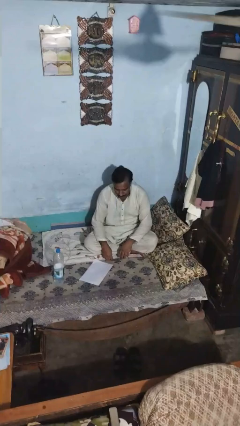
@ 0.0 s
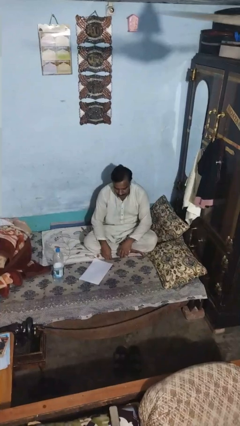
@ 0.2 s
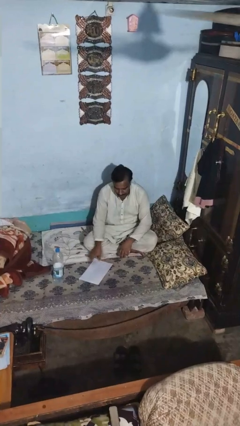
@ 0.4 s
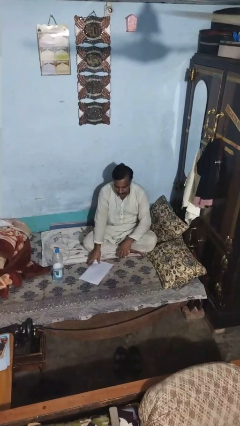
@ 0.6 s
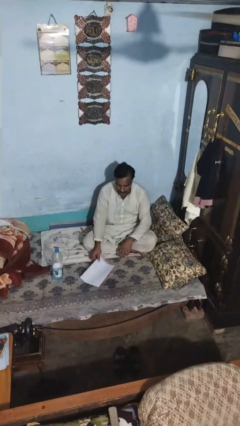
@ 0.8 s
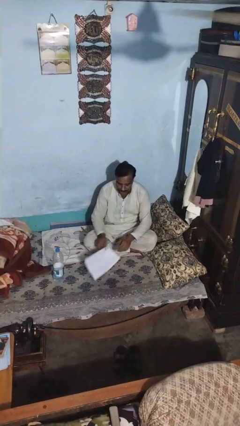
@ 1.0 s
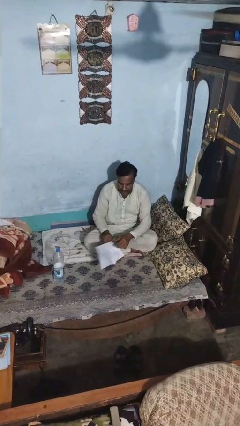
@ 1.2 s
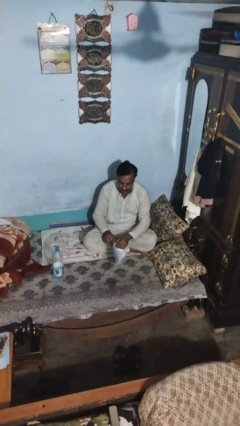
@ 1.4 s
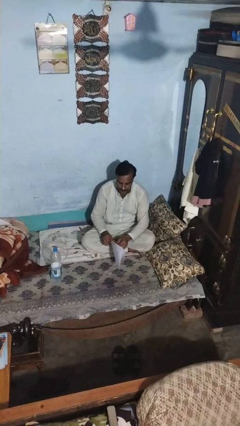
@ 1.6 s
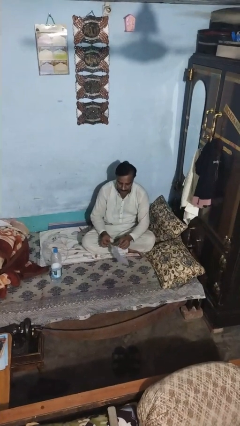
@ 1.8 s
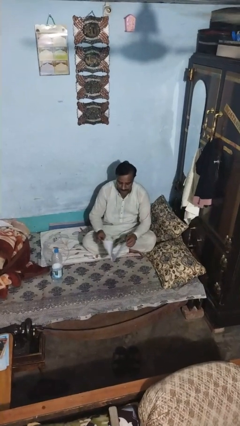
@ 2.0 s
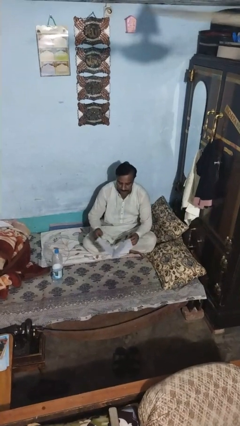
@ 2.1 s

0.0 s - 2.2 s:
person reads newspaper

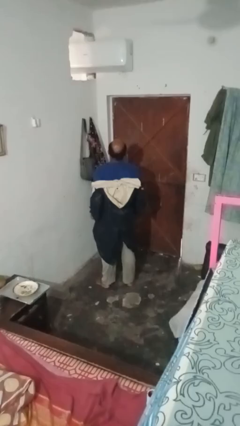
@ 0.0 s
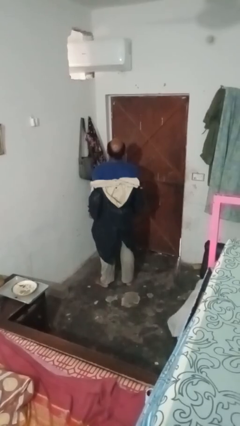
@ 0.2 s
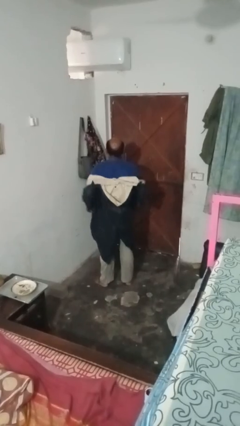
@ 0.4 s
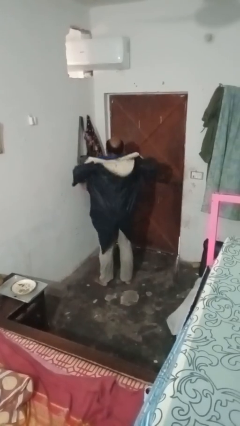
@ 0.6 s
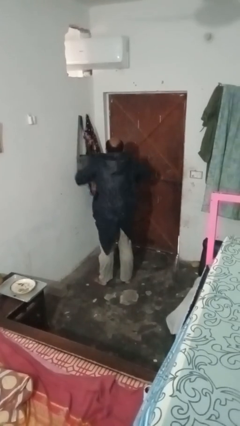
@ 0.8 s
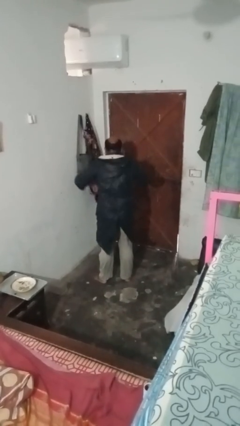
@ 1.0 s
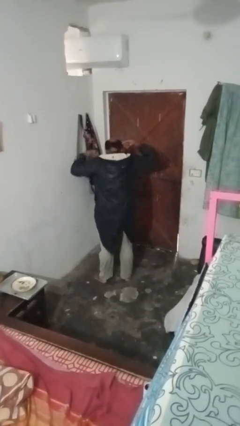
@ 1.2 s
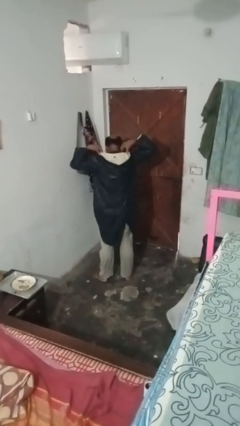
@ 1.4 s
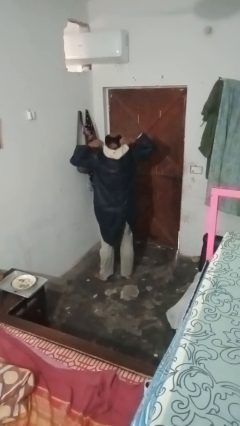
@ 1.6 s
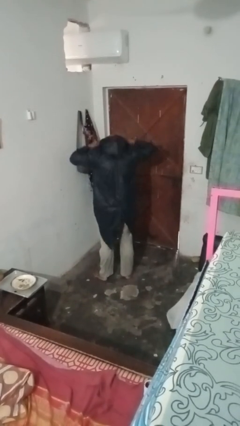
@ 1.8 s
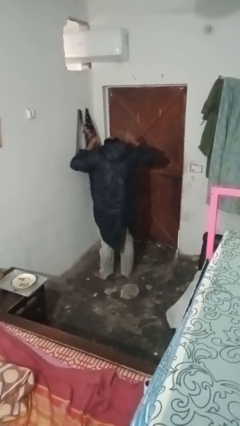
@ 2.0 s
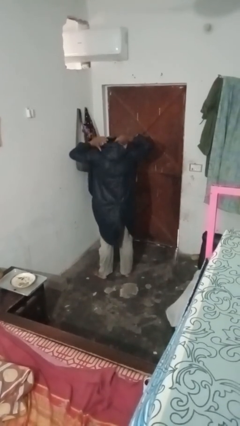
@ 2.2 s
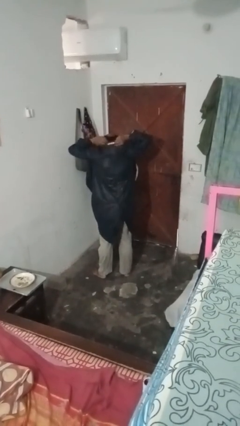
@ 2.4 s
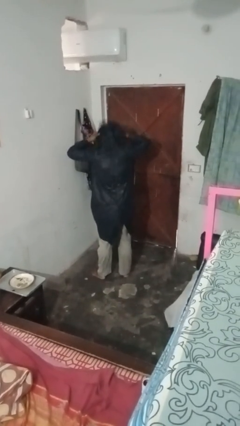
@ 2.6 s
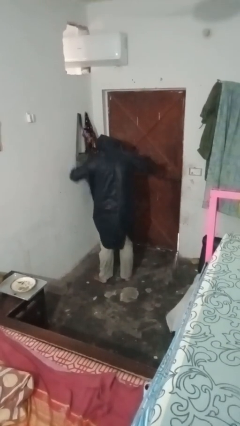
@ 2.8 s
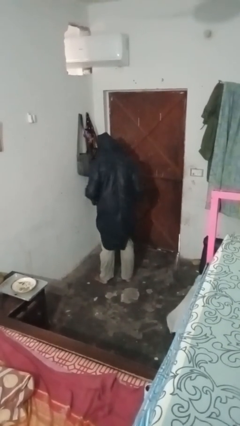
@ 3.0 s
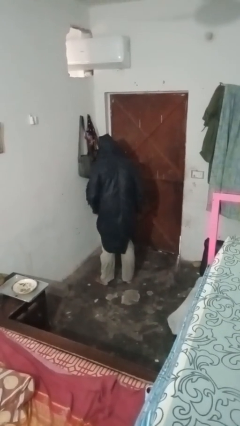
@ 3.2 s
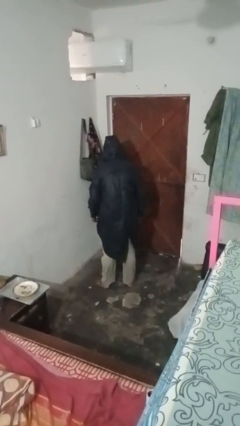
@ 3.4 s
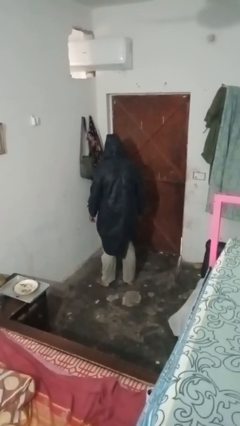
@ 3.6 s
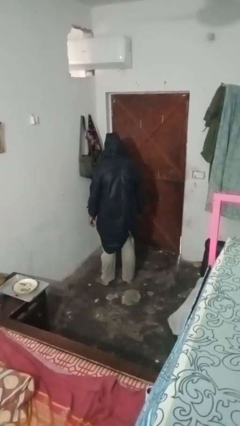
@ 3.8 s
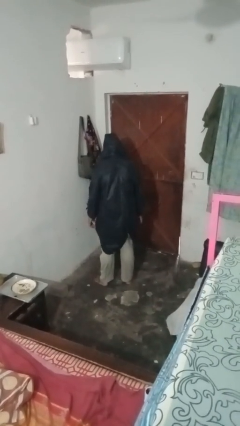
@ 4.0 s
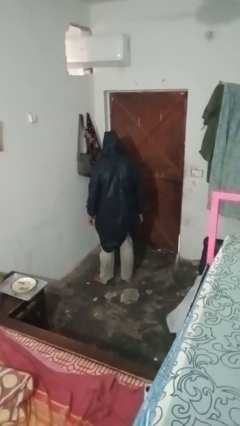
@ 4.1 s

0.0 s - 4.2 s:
person puts on hoodie

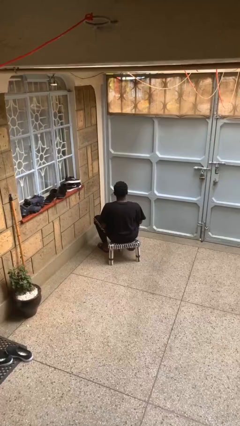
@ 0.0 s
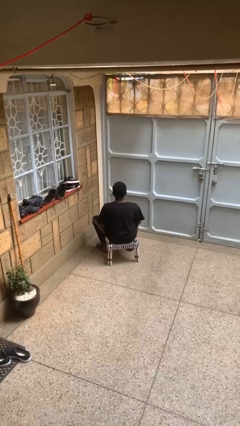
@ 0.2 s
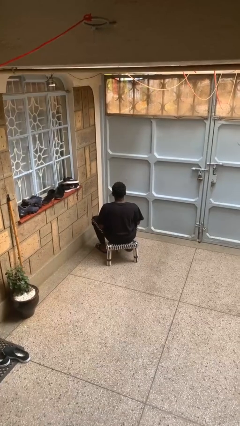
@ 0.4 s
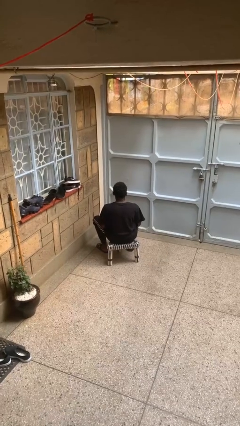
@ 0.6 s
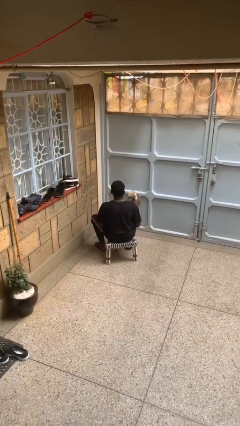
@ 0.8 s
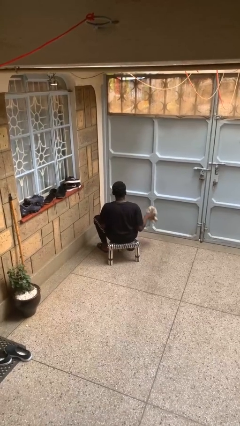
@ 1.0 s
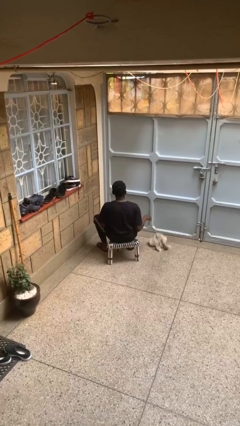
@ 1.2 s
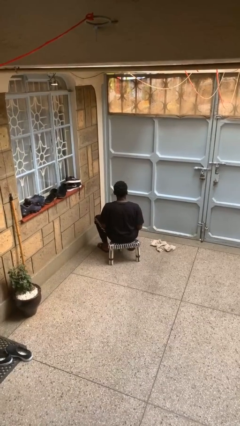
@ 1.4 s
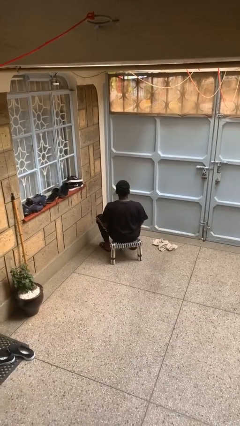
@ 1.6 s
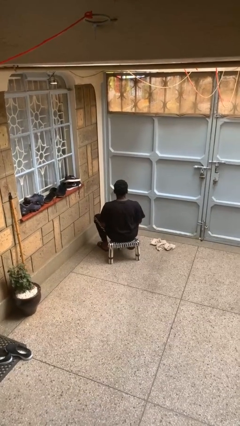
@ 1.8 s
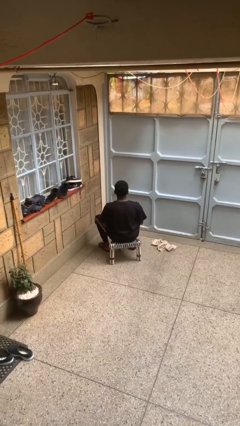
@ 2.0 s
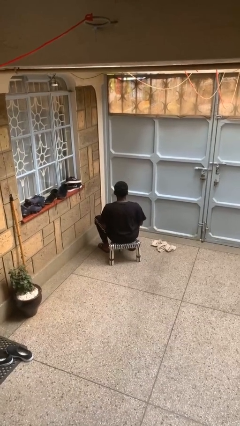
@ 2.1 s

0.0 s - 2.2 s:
person throws object to ground

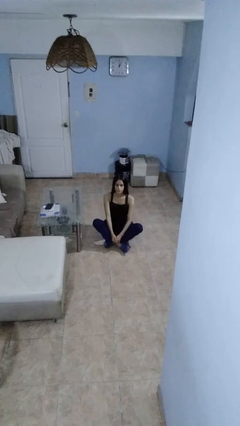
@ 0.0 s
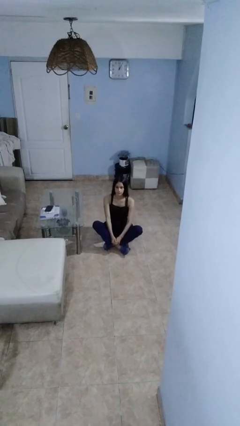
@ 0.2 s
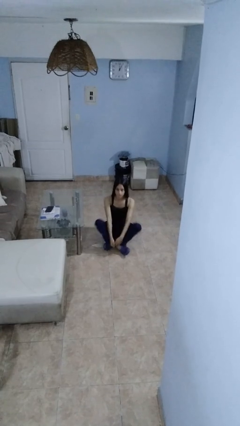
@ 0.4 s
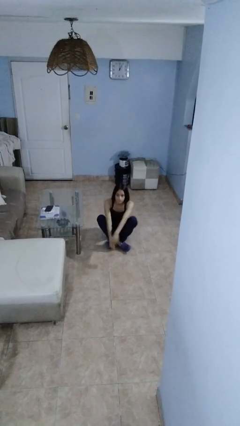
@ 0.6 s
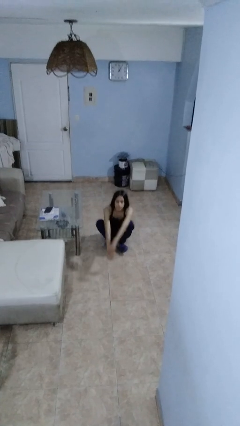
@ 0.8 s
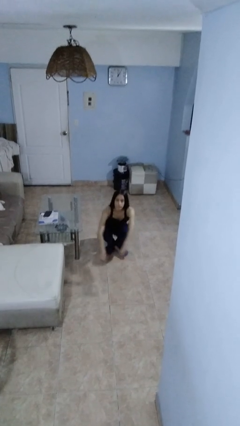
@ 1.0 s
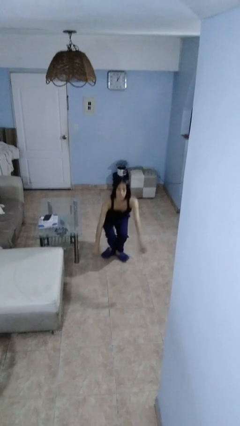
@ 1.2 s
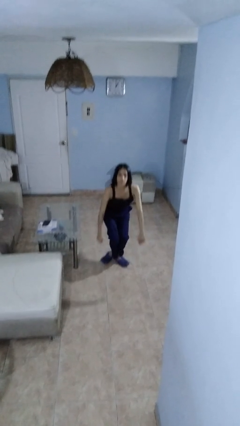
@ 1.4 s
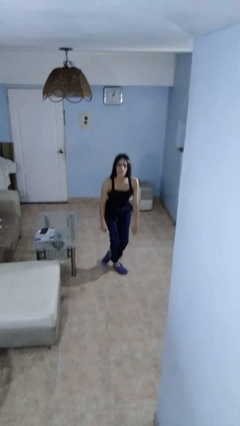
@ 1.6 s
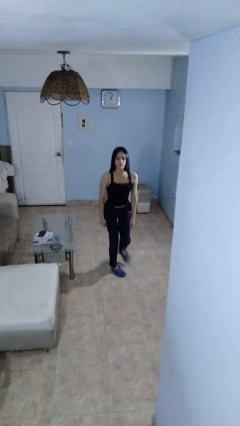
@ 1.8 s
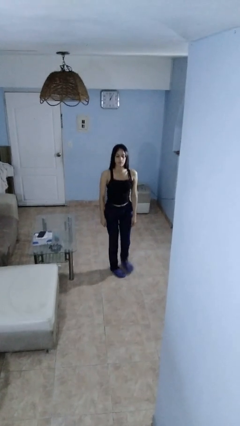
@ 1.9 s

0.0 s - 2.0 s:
person stands up from floor

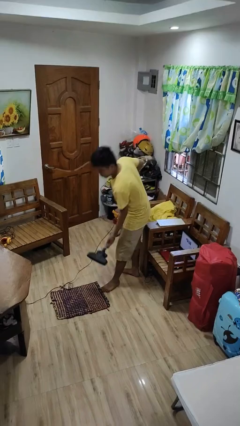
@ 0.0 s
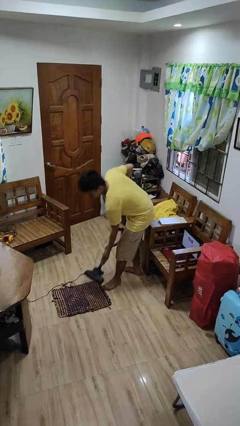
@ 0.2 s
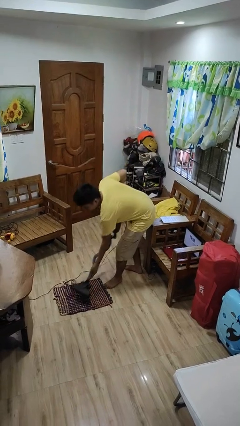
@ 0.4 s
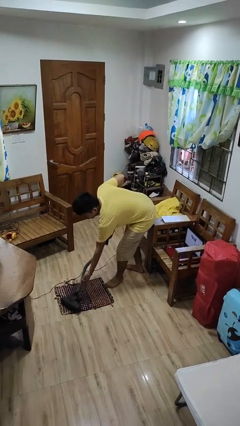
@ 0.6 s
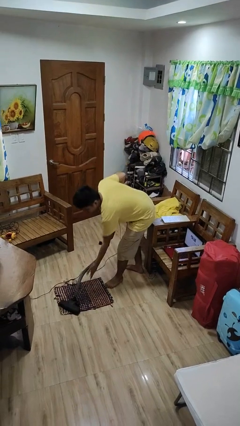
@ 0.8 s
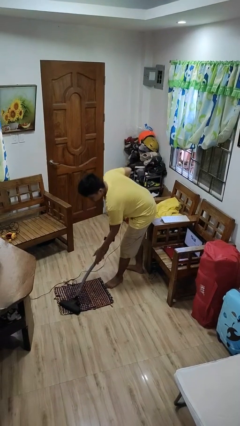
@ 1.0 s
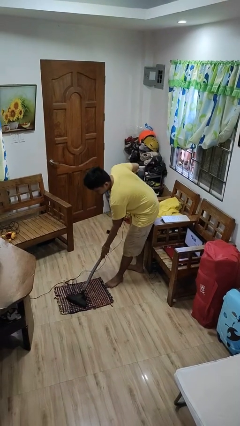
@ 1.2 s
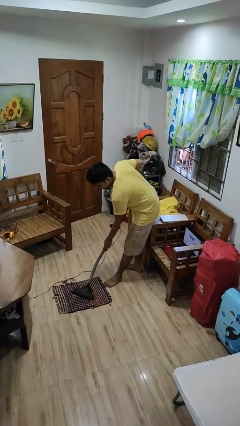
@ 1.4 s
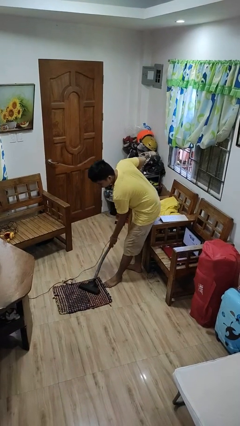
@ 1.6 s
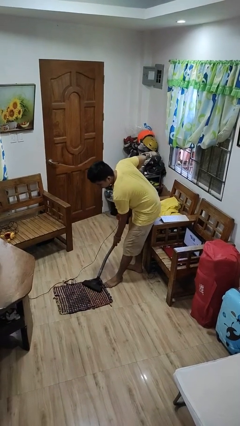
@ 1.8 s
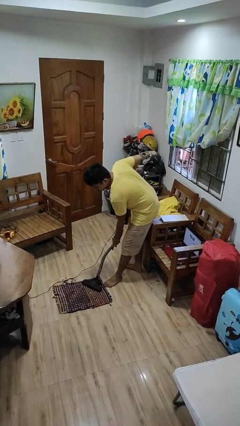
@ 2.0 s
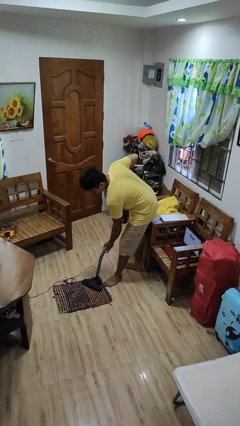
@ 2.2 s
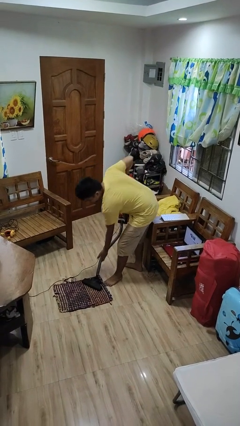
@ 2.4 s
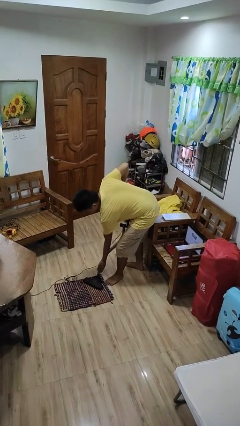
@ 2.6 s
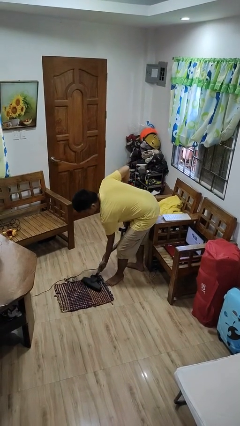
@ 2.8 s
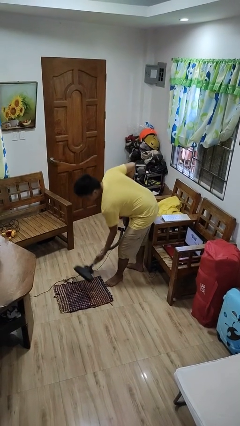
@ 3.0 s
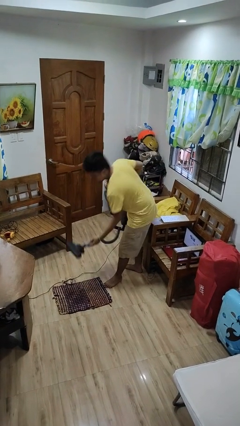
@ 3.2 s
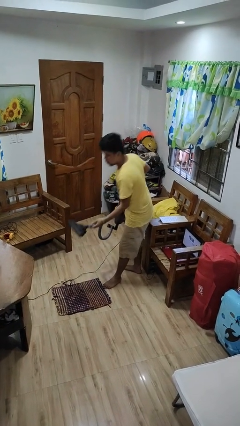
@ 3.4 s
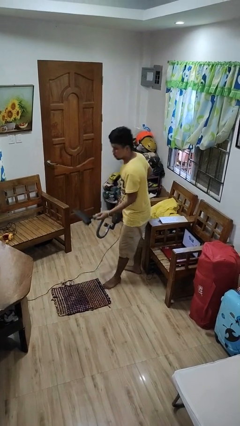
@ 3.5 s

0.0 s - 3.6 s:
person vacuums carpet

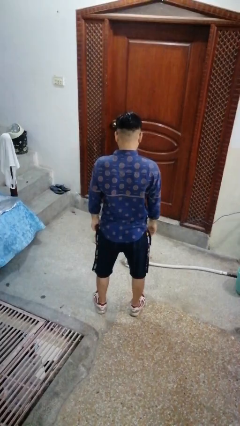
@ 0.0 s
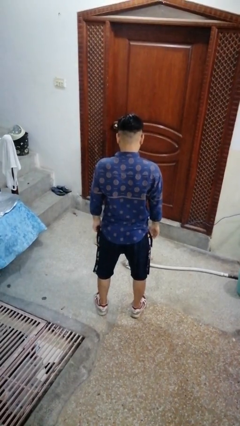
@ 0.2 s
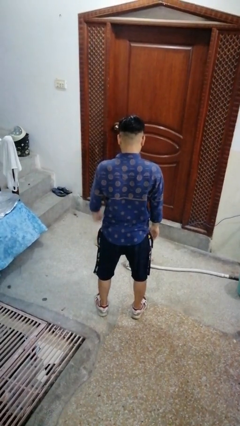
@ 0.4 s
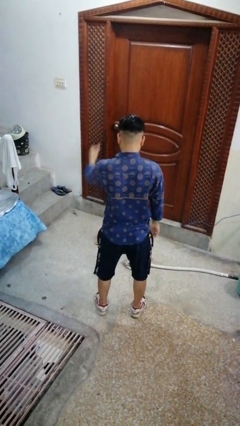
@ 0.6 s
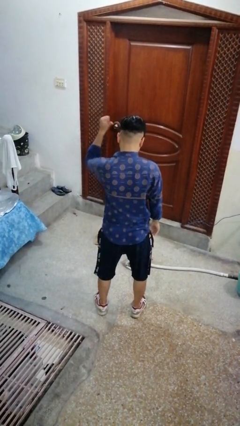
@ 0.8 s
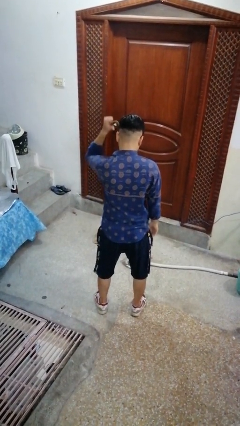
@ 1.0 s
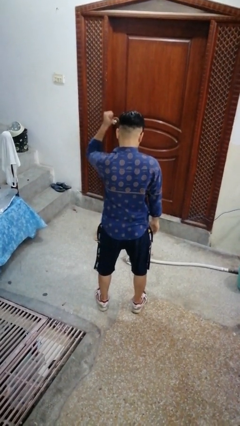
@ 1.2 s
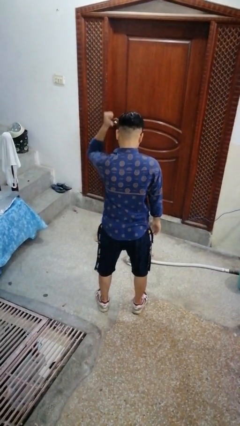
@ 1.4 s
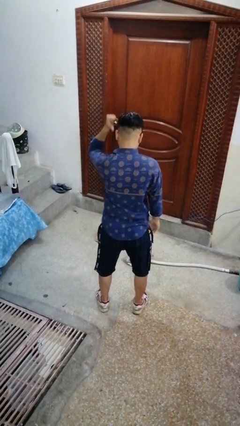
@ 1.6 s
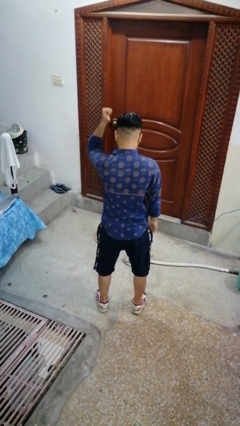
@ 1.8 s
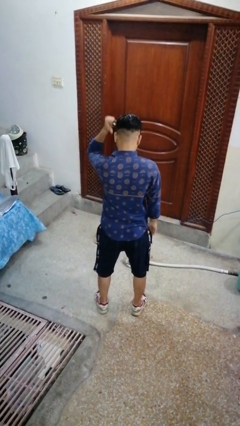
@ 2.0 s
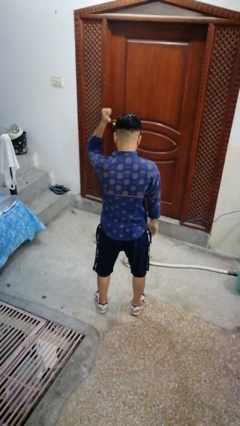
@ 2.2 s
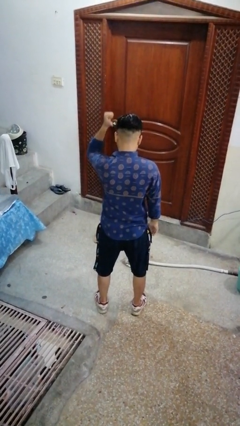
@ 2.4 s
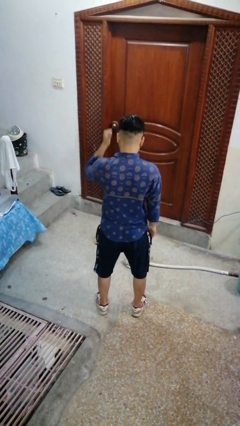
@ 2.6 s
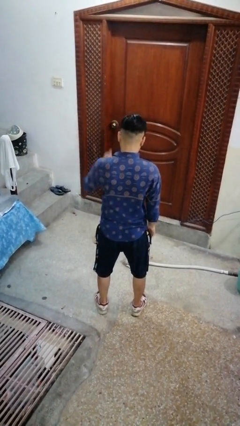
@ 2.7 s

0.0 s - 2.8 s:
person gestures behind me
